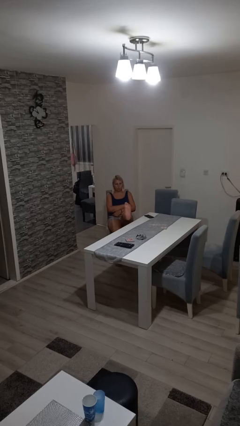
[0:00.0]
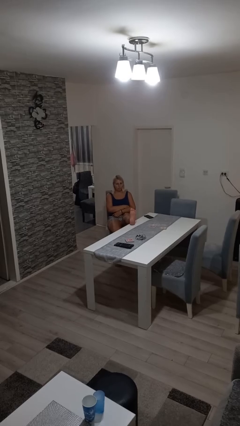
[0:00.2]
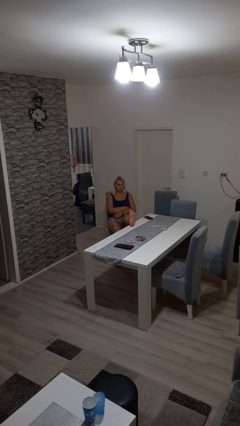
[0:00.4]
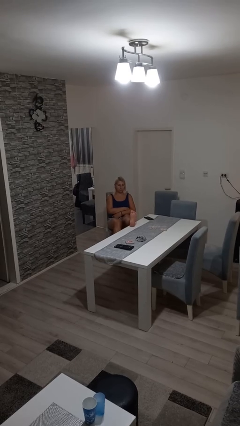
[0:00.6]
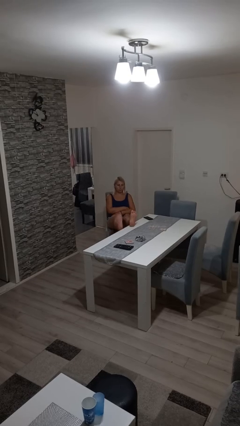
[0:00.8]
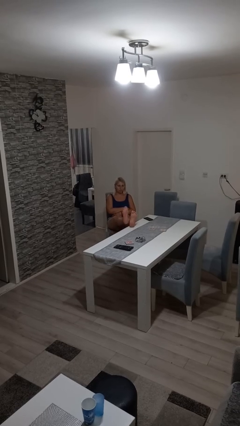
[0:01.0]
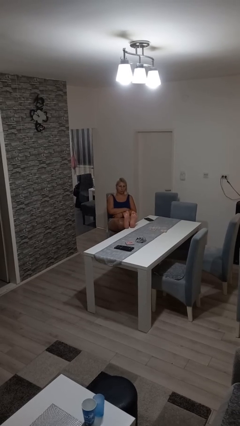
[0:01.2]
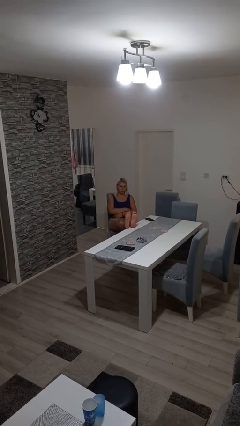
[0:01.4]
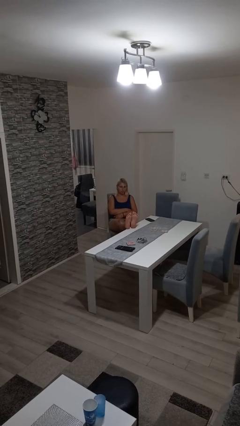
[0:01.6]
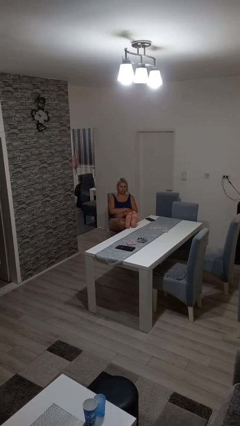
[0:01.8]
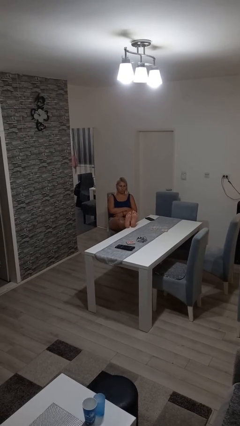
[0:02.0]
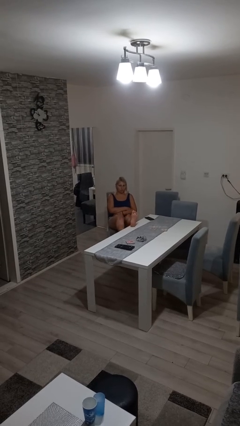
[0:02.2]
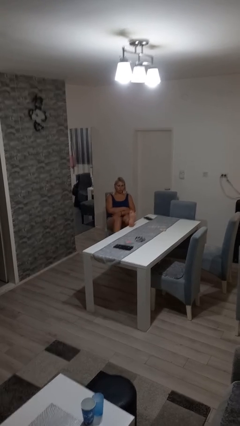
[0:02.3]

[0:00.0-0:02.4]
person puts feet up

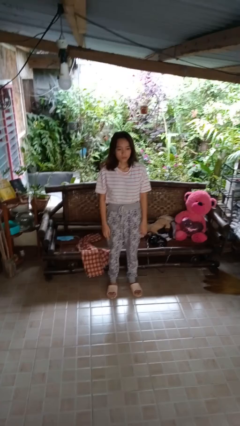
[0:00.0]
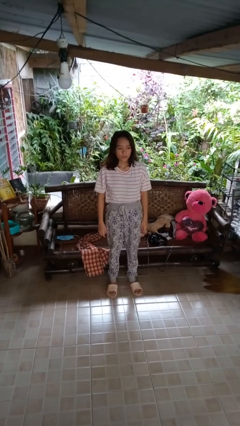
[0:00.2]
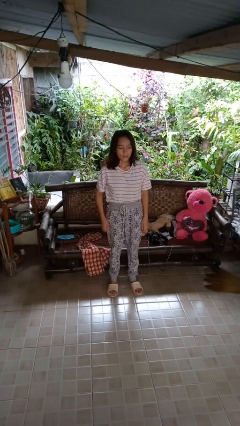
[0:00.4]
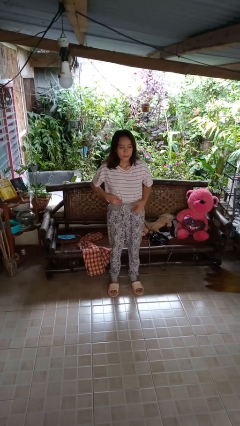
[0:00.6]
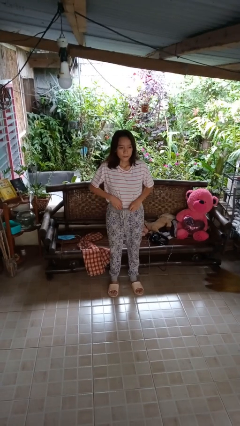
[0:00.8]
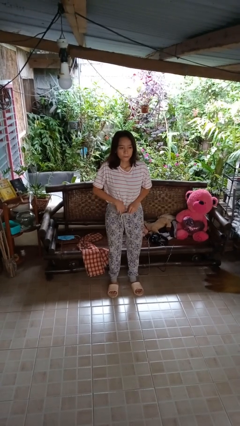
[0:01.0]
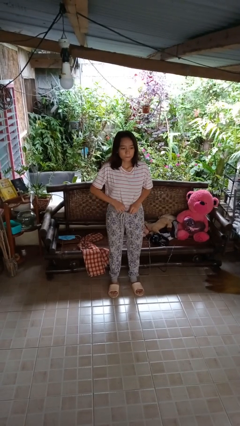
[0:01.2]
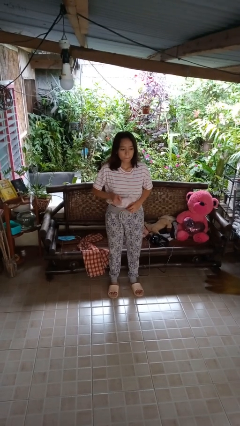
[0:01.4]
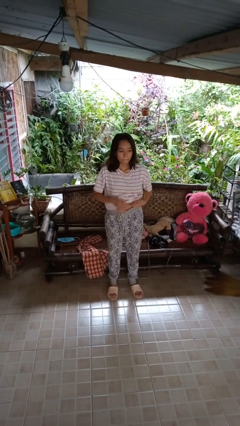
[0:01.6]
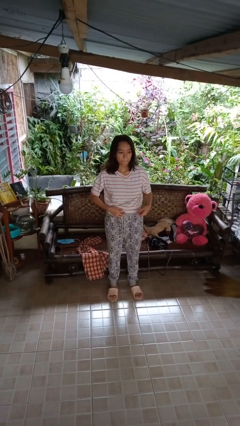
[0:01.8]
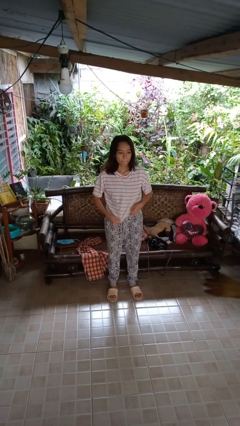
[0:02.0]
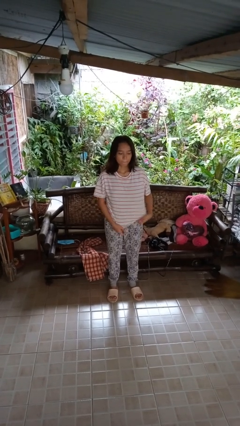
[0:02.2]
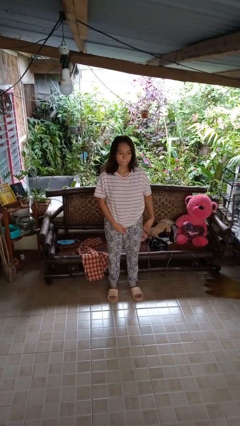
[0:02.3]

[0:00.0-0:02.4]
person untucks shirt

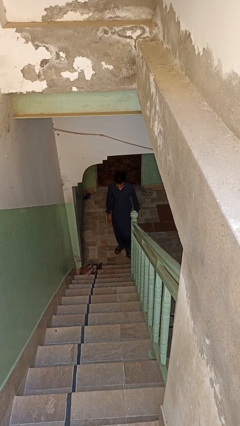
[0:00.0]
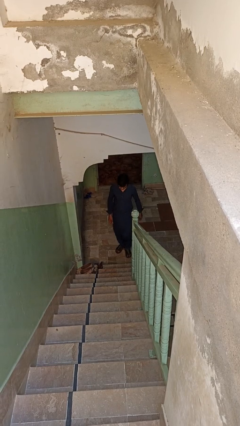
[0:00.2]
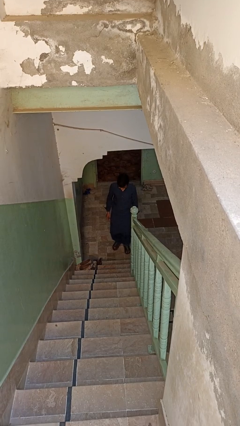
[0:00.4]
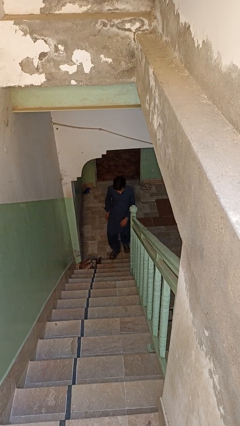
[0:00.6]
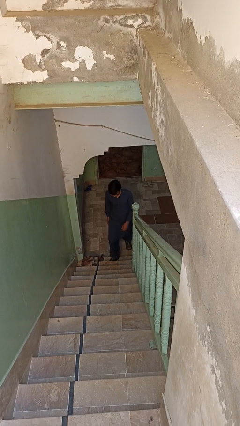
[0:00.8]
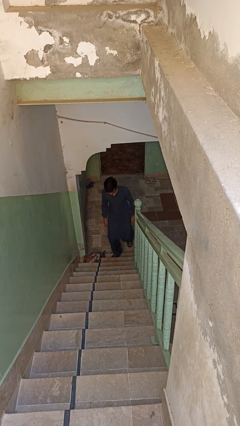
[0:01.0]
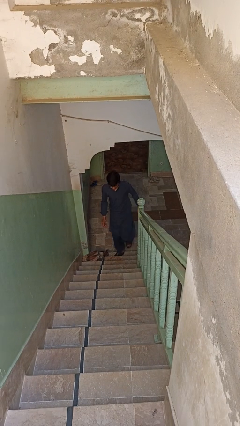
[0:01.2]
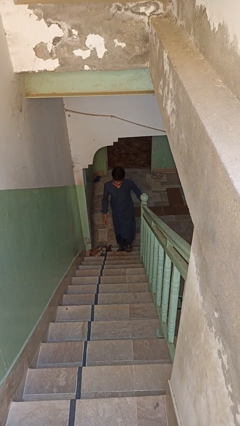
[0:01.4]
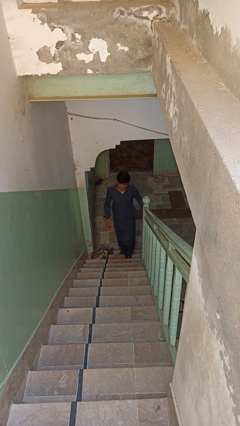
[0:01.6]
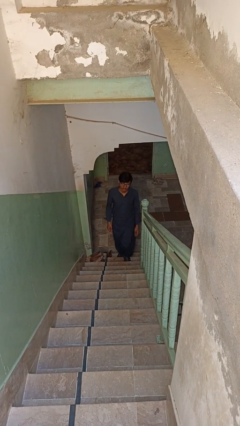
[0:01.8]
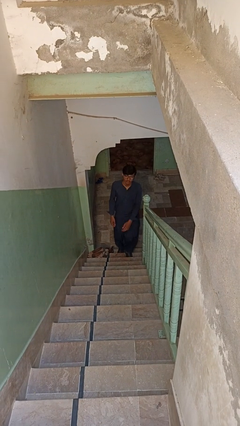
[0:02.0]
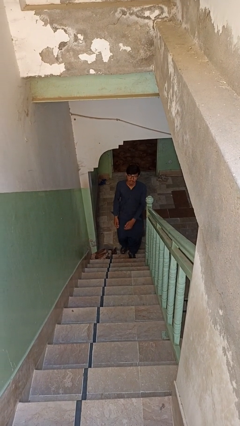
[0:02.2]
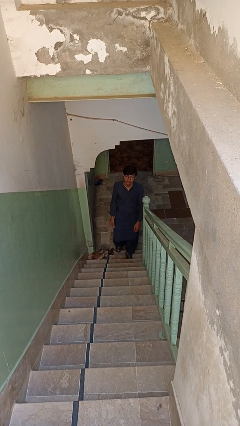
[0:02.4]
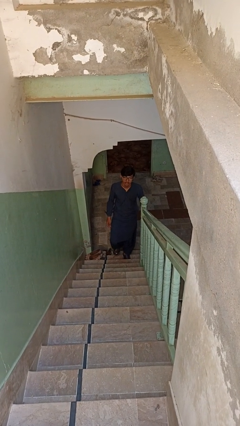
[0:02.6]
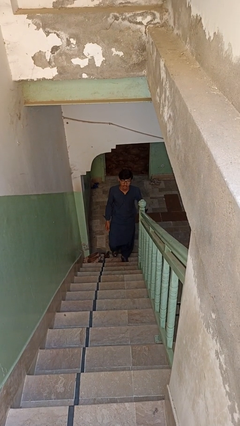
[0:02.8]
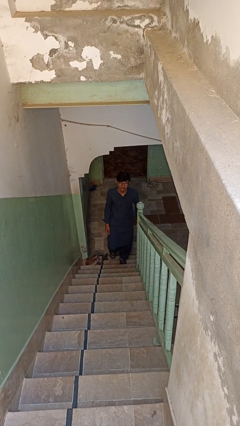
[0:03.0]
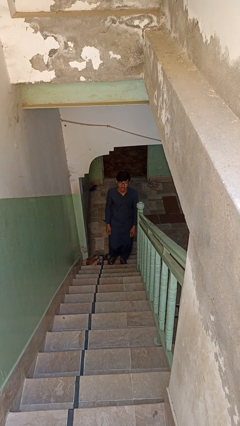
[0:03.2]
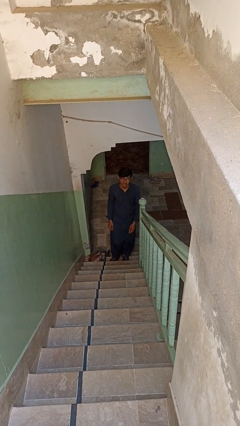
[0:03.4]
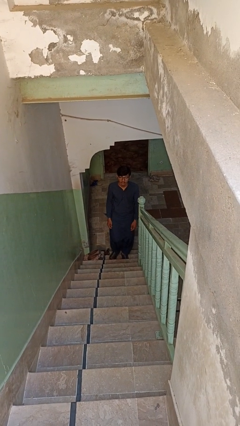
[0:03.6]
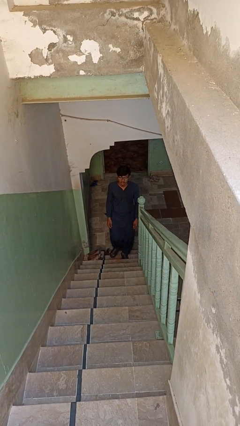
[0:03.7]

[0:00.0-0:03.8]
person climbs up stairs

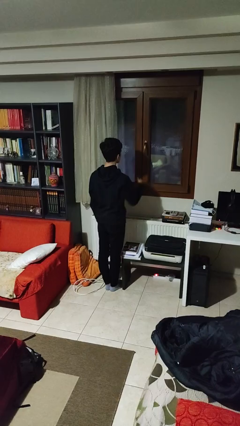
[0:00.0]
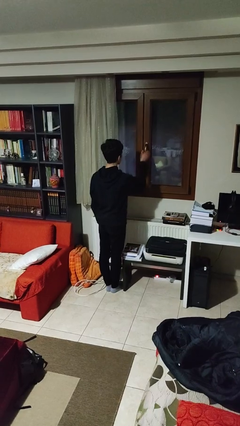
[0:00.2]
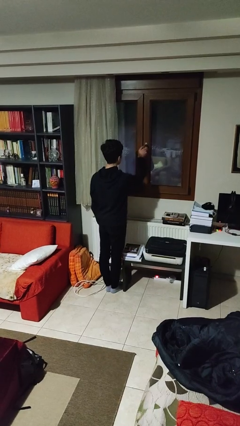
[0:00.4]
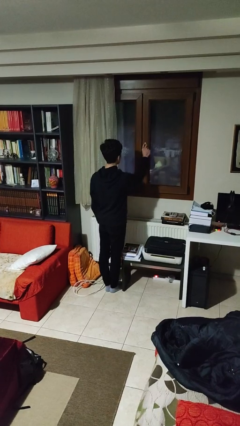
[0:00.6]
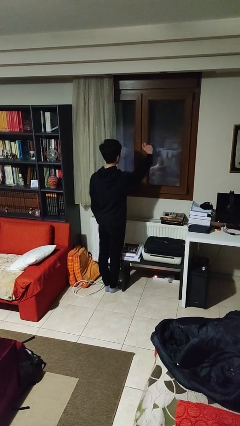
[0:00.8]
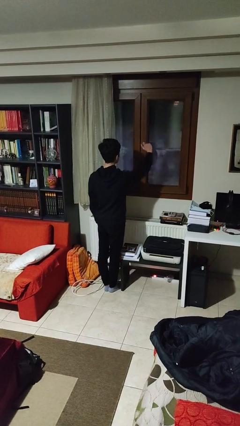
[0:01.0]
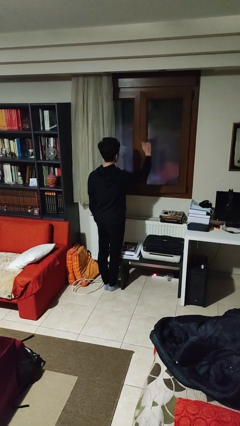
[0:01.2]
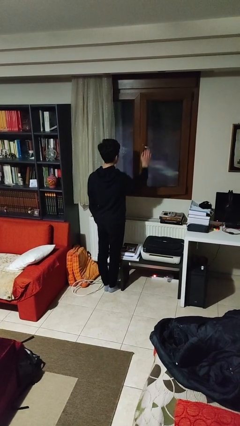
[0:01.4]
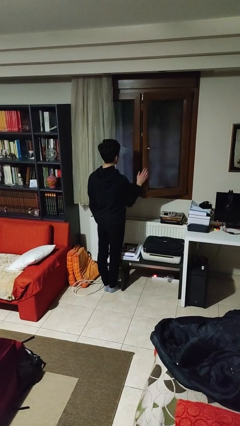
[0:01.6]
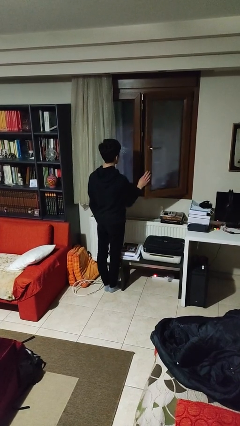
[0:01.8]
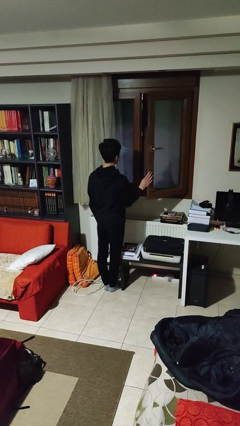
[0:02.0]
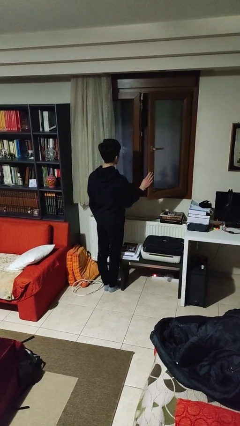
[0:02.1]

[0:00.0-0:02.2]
person opens home window

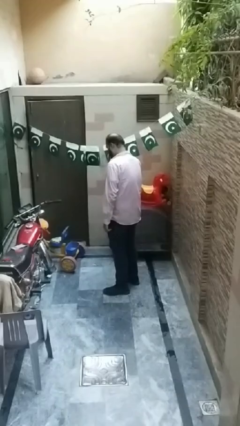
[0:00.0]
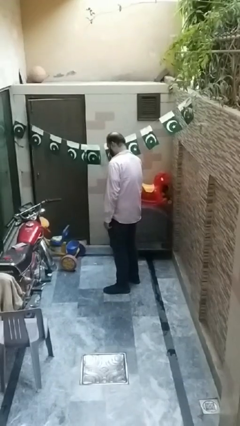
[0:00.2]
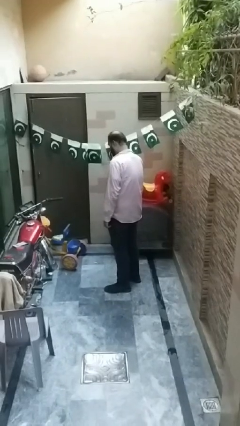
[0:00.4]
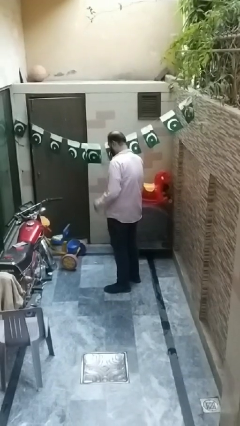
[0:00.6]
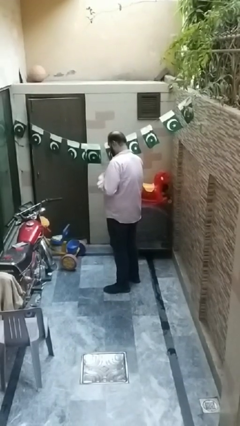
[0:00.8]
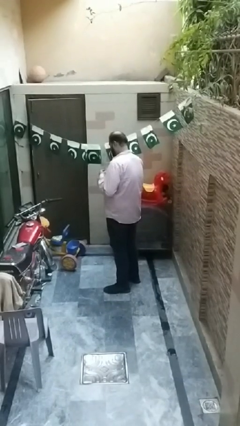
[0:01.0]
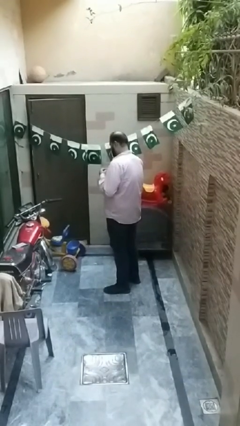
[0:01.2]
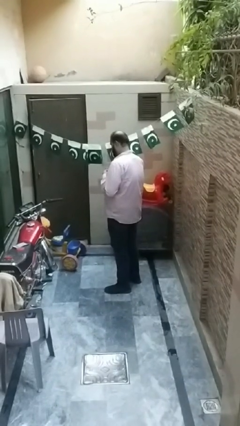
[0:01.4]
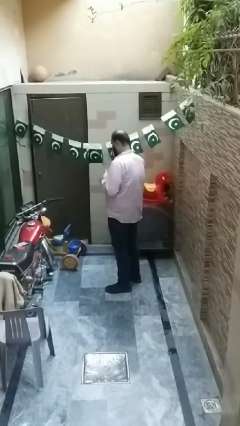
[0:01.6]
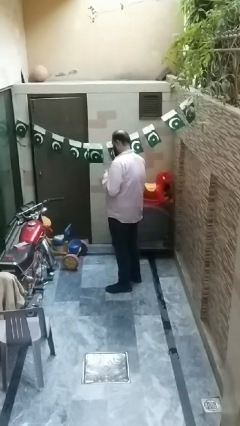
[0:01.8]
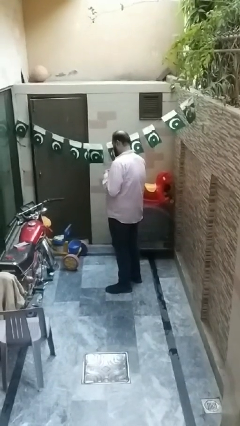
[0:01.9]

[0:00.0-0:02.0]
person buttons shirt

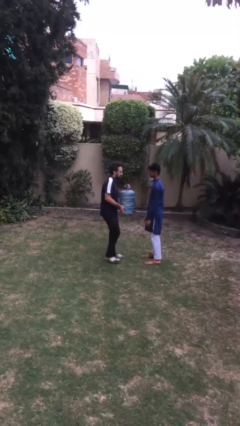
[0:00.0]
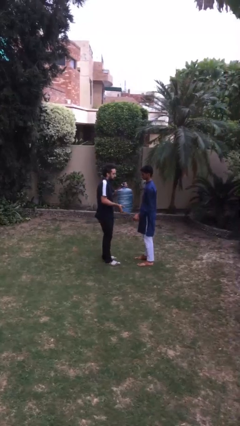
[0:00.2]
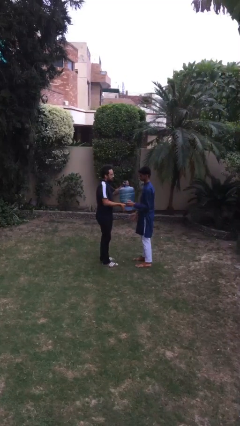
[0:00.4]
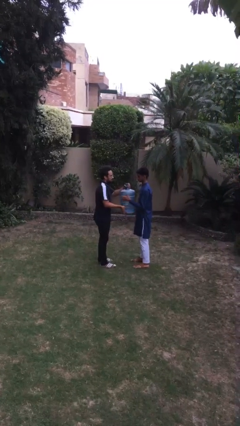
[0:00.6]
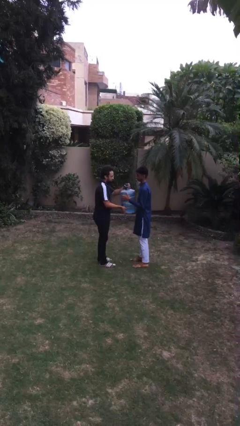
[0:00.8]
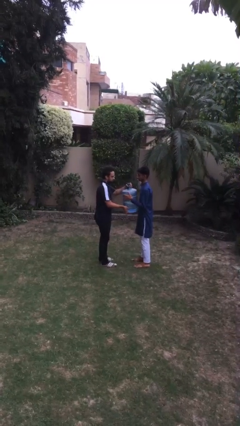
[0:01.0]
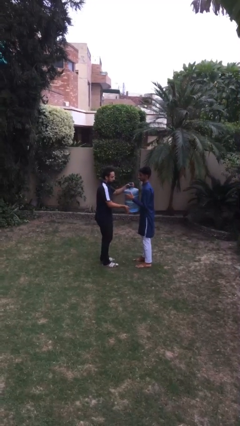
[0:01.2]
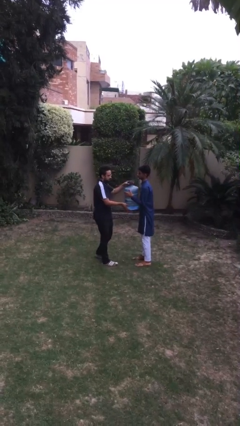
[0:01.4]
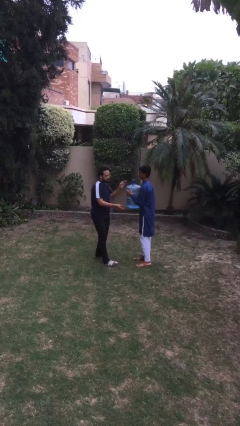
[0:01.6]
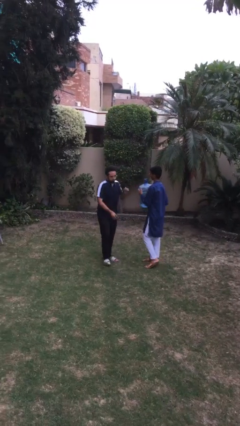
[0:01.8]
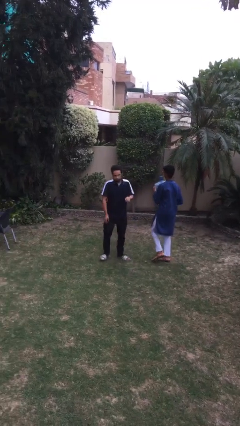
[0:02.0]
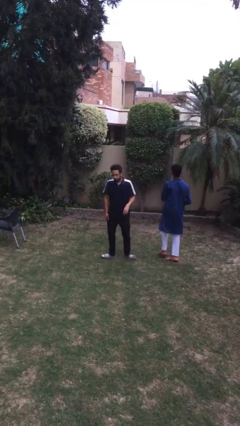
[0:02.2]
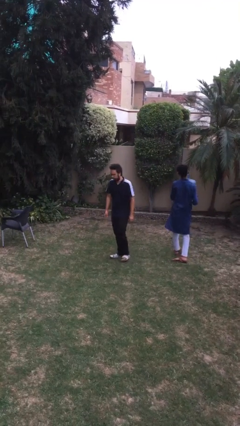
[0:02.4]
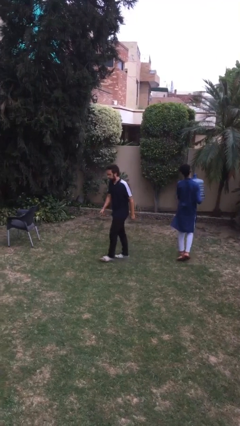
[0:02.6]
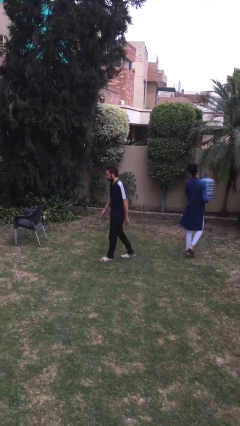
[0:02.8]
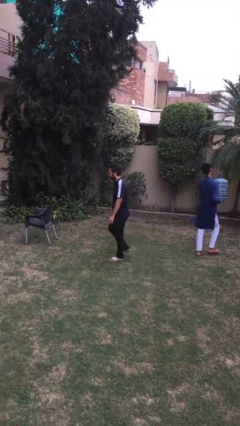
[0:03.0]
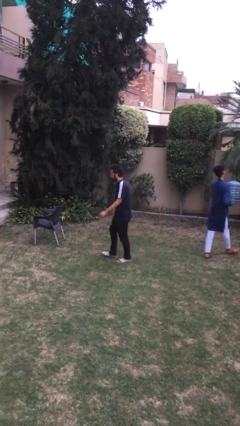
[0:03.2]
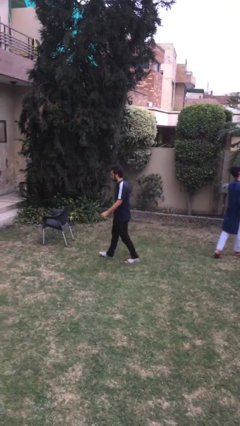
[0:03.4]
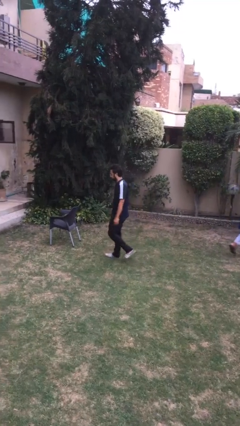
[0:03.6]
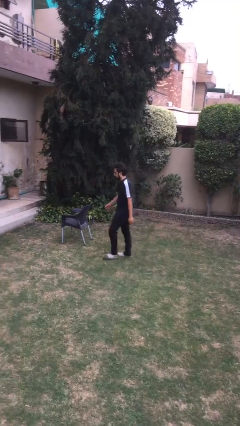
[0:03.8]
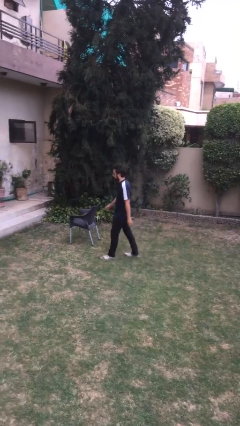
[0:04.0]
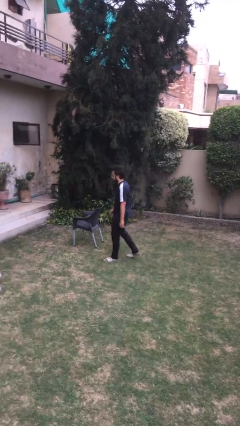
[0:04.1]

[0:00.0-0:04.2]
person transfers object to person
